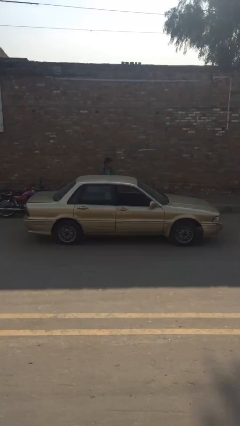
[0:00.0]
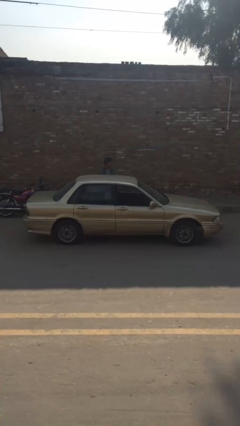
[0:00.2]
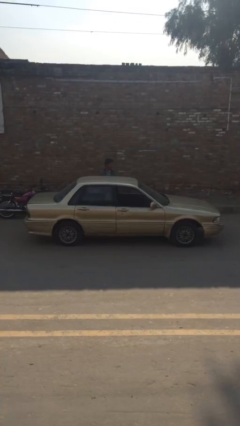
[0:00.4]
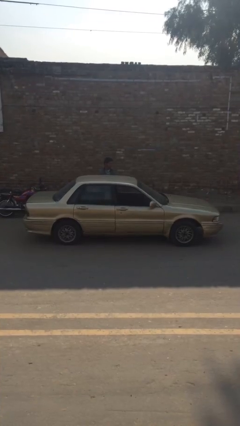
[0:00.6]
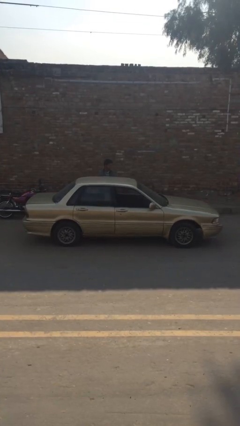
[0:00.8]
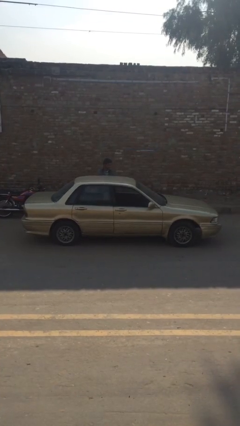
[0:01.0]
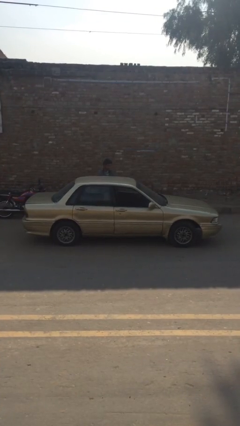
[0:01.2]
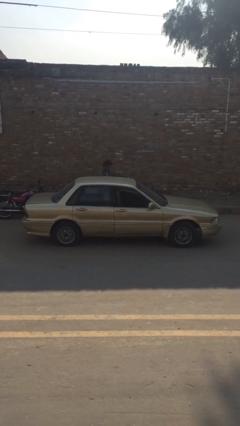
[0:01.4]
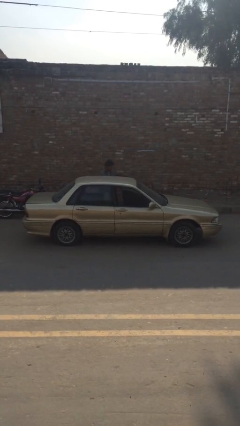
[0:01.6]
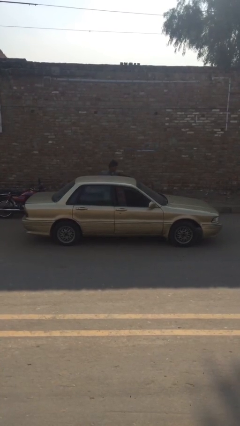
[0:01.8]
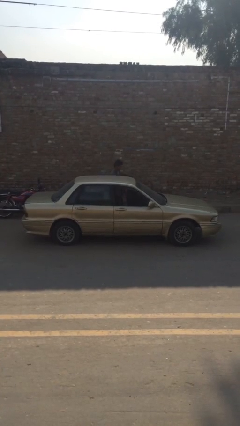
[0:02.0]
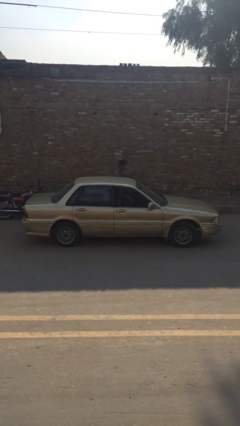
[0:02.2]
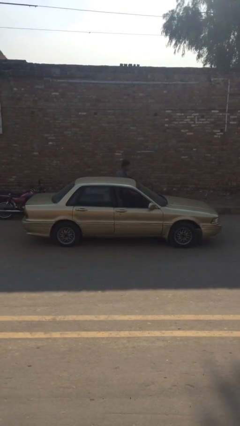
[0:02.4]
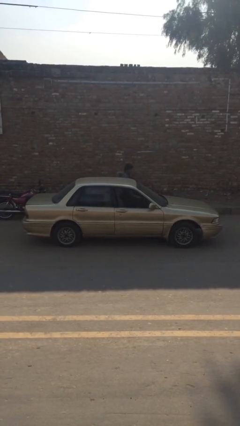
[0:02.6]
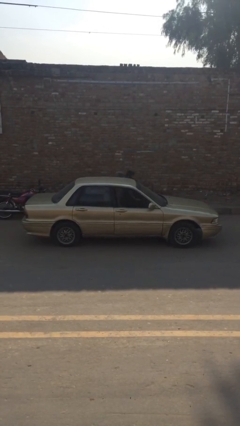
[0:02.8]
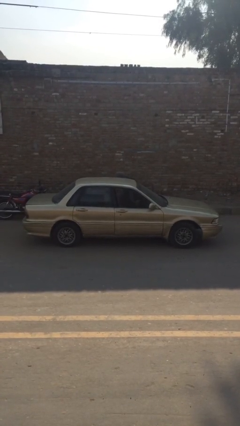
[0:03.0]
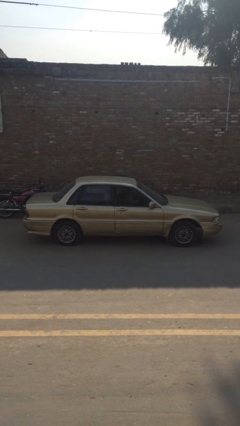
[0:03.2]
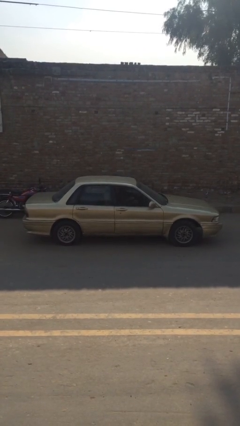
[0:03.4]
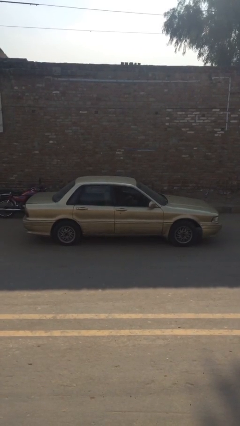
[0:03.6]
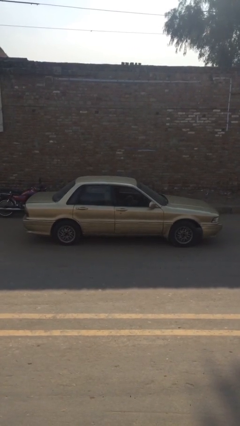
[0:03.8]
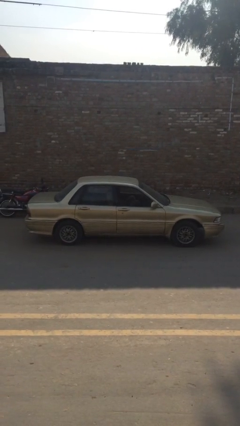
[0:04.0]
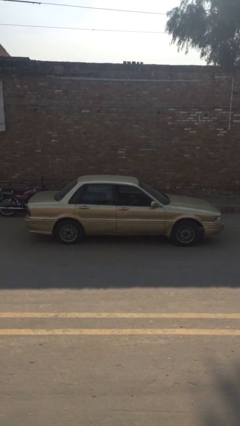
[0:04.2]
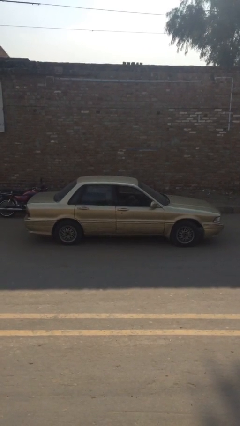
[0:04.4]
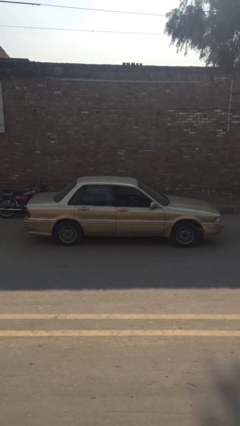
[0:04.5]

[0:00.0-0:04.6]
car picks up person

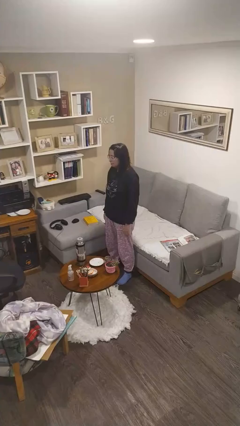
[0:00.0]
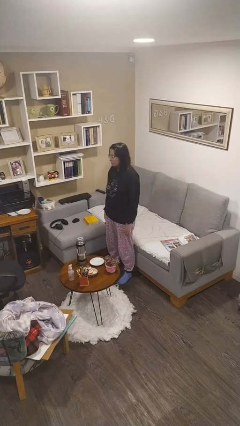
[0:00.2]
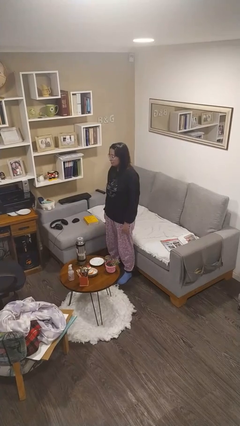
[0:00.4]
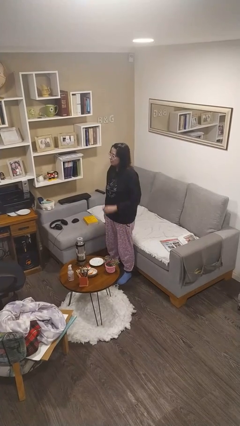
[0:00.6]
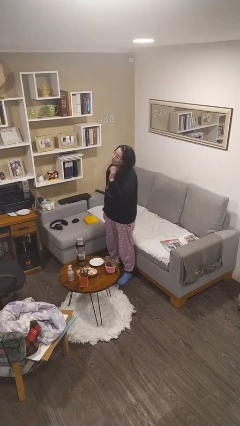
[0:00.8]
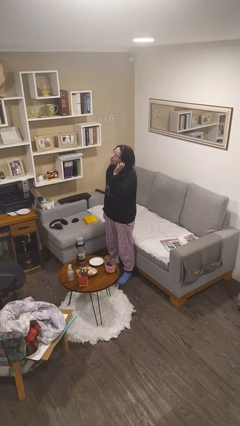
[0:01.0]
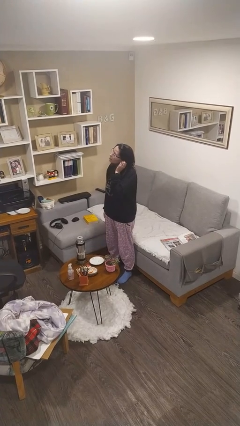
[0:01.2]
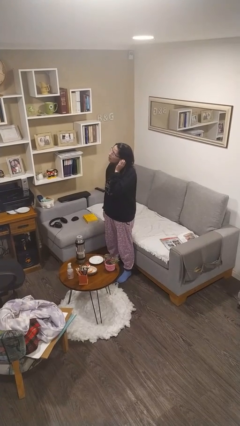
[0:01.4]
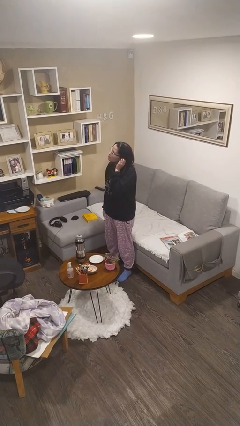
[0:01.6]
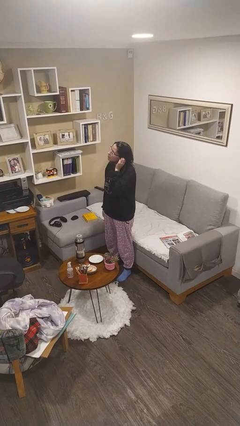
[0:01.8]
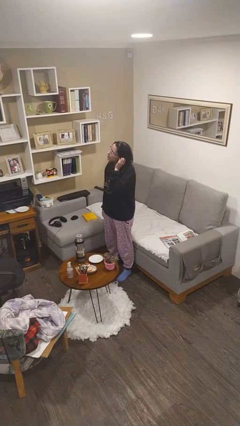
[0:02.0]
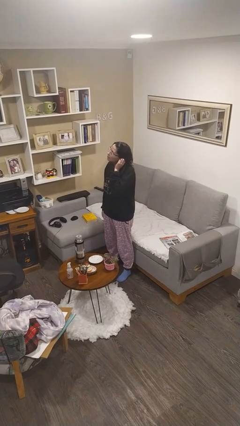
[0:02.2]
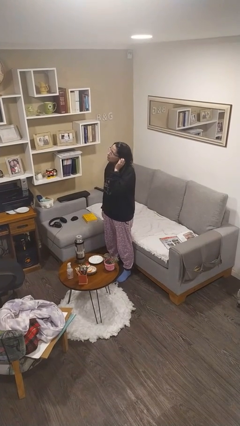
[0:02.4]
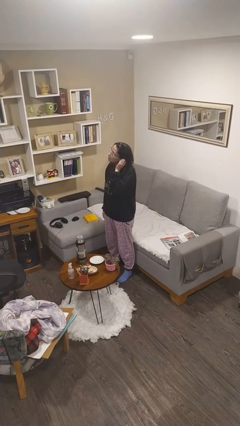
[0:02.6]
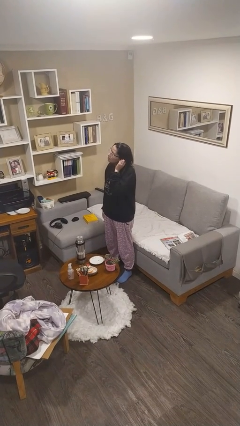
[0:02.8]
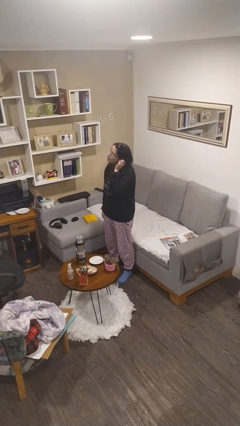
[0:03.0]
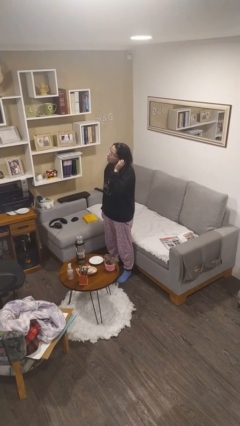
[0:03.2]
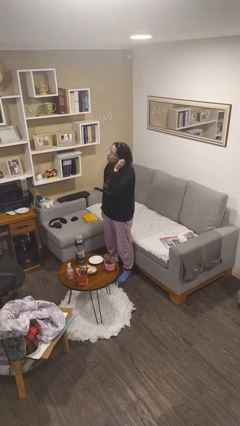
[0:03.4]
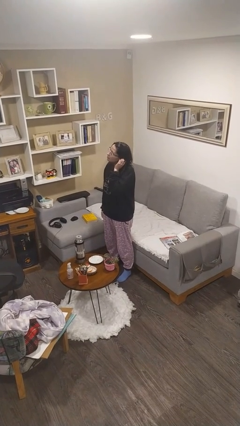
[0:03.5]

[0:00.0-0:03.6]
person scratches face

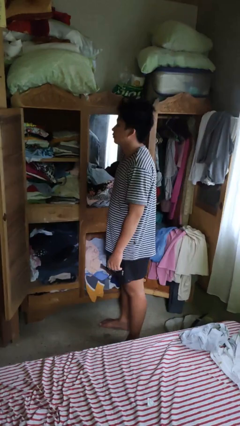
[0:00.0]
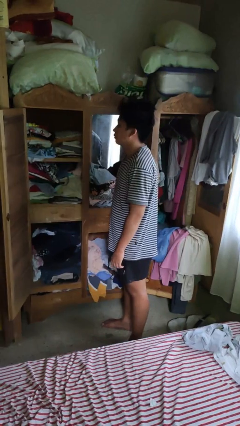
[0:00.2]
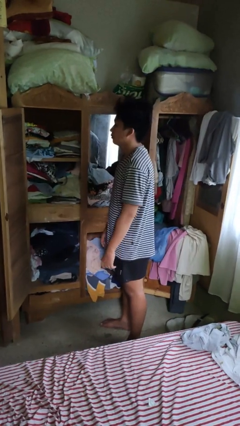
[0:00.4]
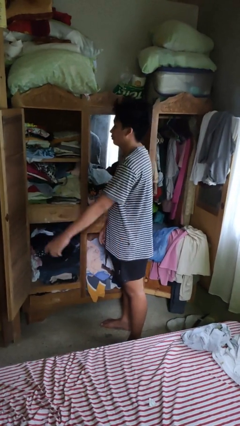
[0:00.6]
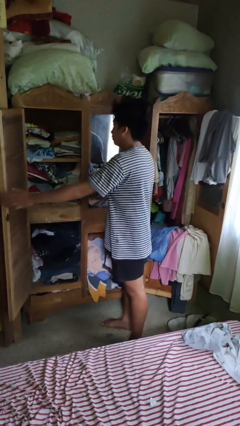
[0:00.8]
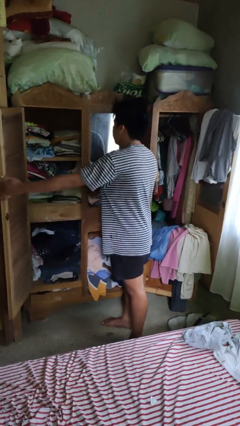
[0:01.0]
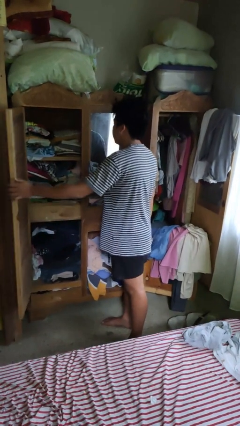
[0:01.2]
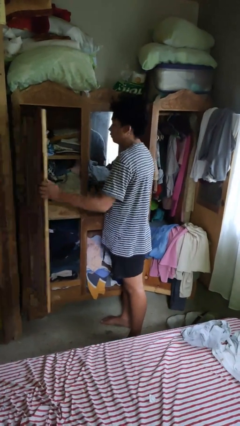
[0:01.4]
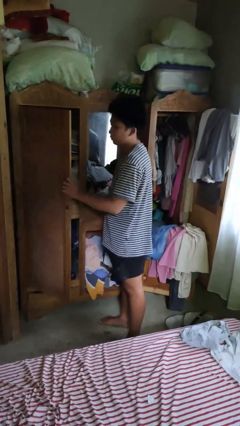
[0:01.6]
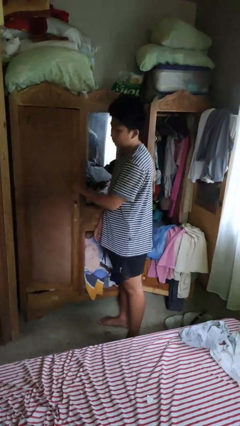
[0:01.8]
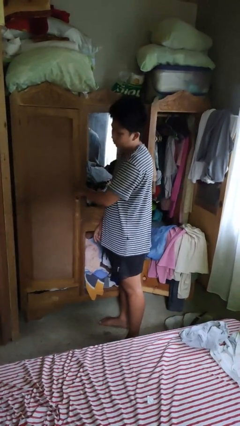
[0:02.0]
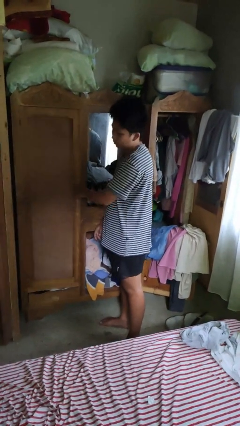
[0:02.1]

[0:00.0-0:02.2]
person closes dresser drawer

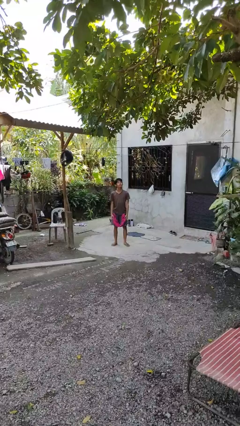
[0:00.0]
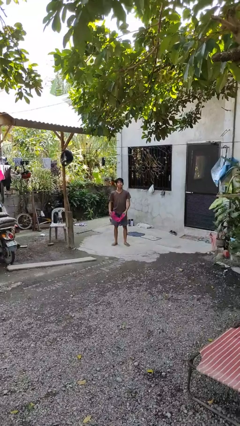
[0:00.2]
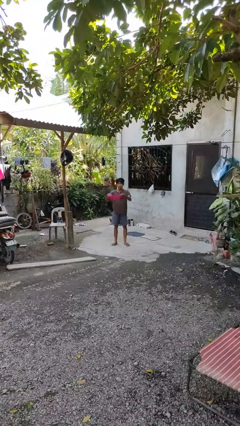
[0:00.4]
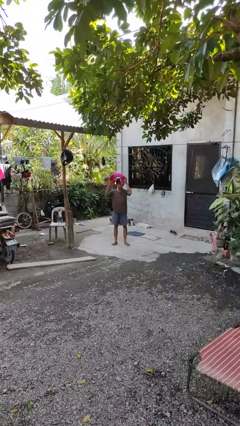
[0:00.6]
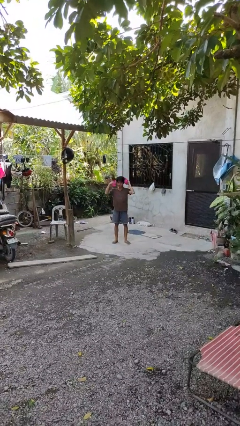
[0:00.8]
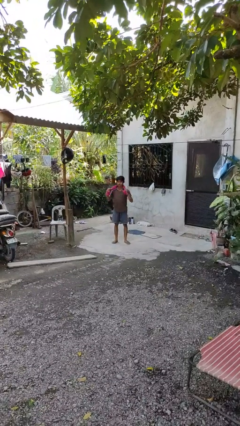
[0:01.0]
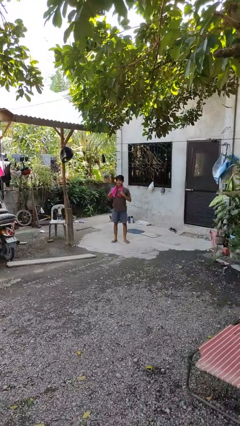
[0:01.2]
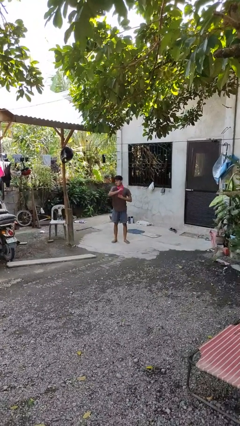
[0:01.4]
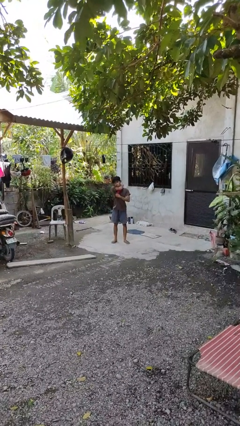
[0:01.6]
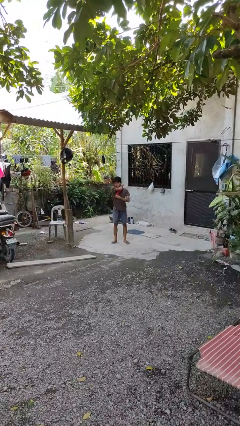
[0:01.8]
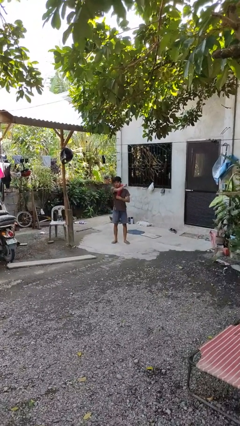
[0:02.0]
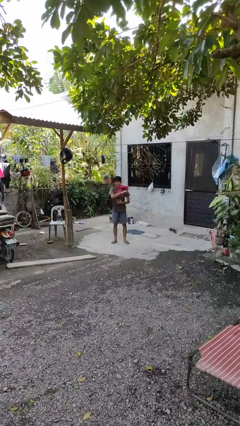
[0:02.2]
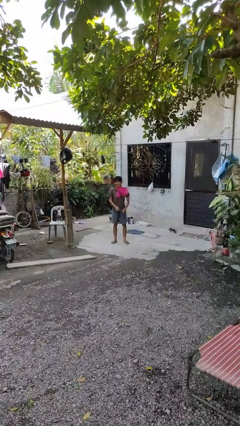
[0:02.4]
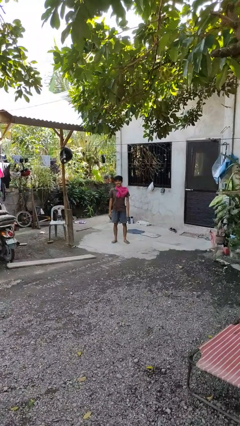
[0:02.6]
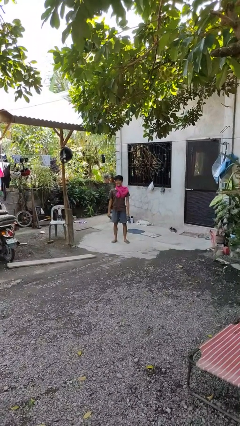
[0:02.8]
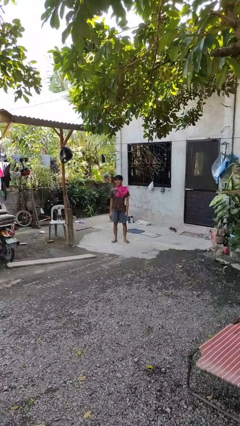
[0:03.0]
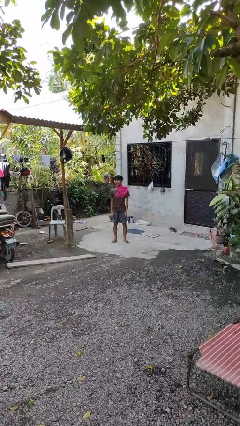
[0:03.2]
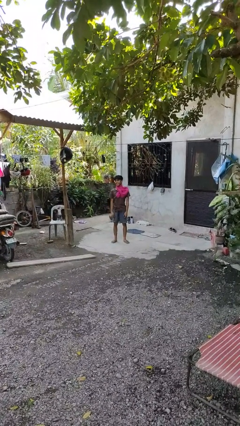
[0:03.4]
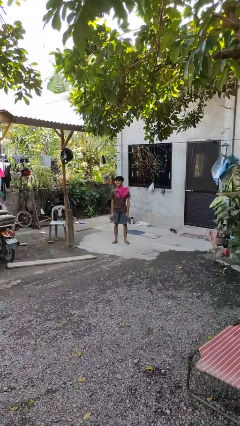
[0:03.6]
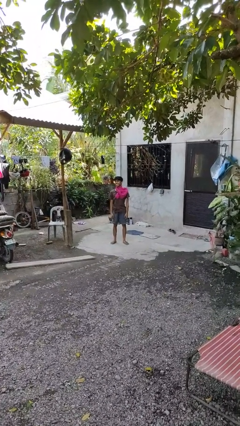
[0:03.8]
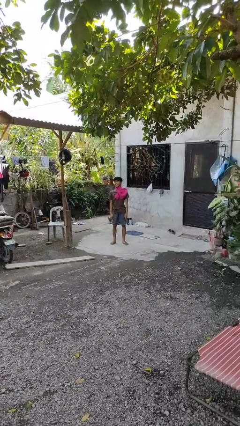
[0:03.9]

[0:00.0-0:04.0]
person puts on scarf

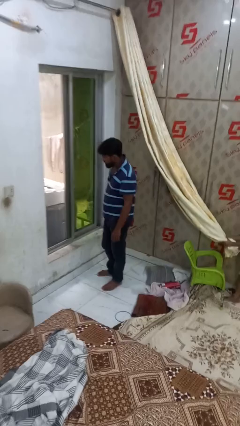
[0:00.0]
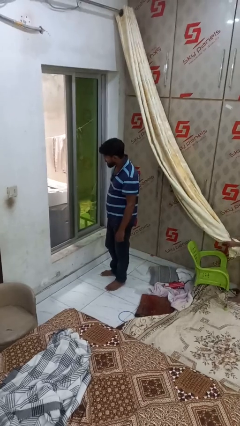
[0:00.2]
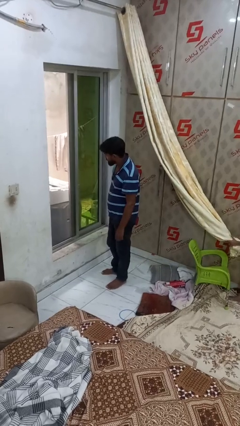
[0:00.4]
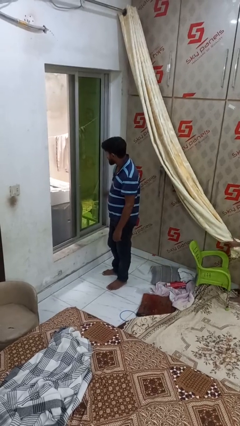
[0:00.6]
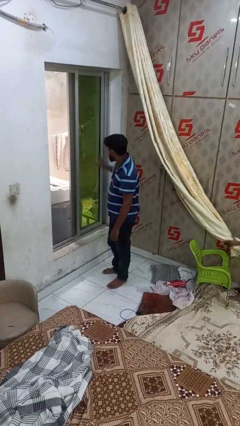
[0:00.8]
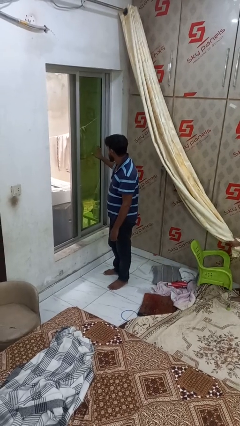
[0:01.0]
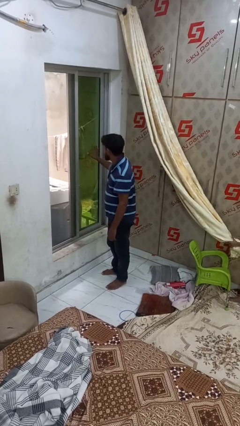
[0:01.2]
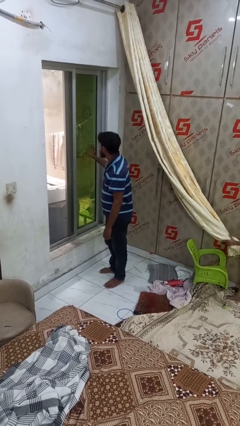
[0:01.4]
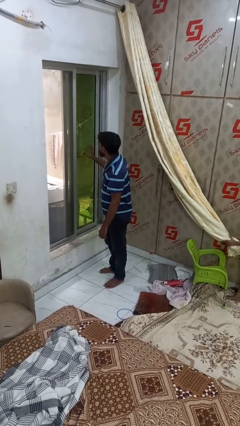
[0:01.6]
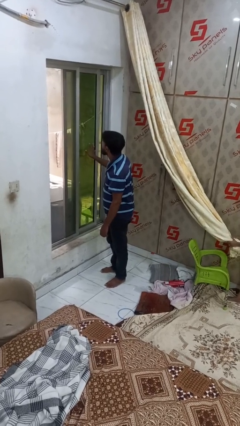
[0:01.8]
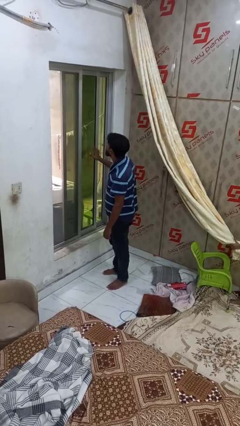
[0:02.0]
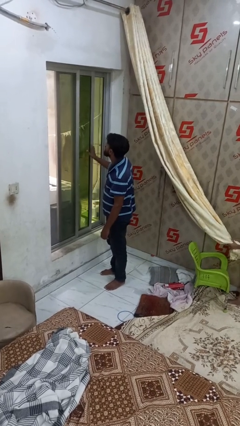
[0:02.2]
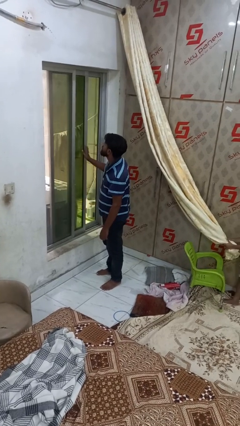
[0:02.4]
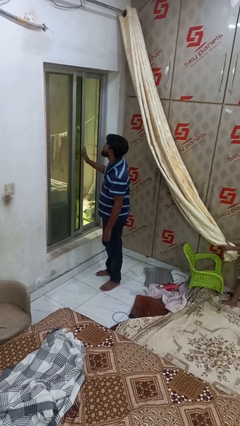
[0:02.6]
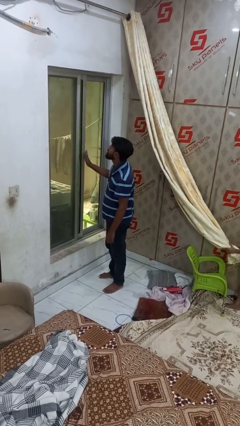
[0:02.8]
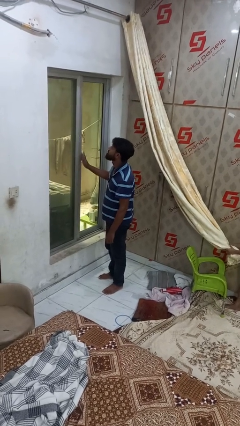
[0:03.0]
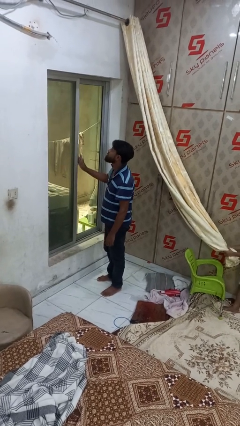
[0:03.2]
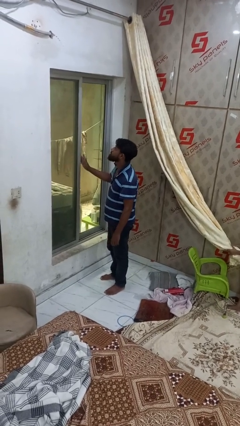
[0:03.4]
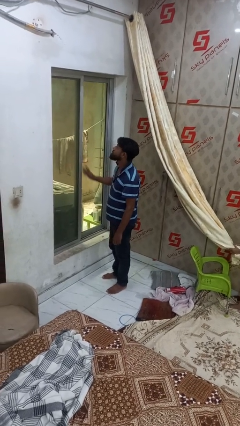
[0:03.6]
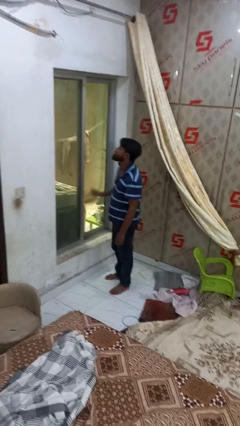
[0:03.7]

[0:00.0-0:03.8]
person closes sliding door
